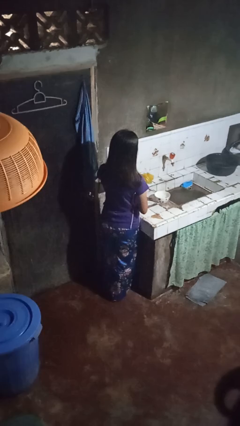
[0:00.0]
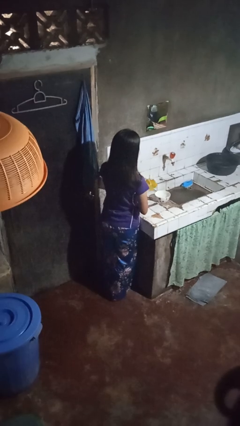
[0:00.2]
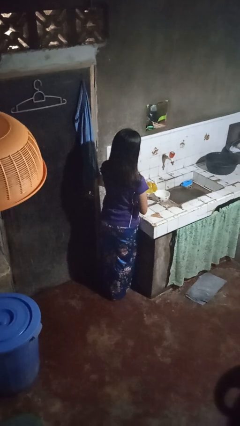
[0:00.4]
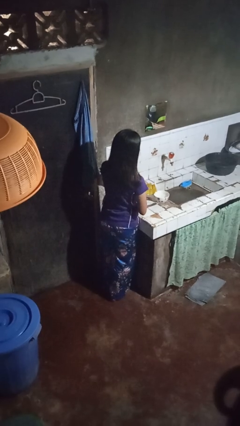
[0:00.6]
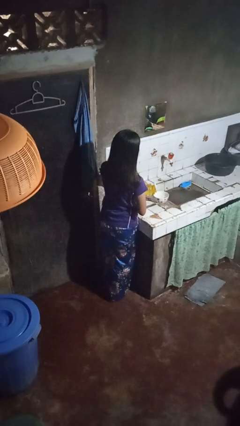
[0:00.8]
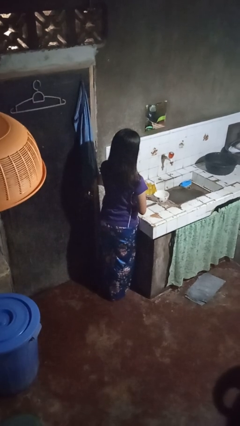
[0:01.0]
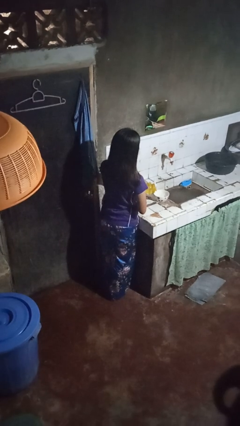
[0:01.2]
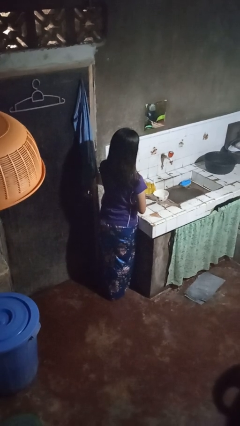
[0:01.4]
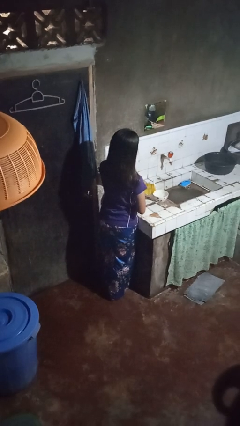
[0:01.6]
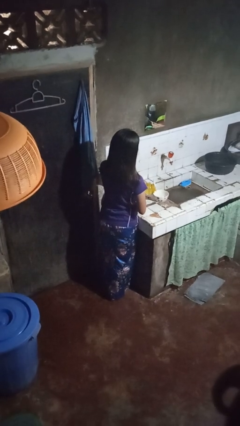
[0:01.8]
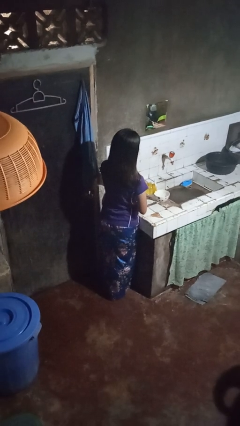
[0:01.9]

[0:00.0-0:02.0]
person pours into bowl

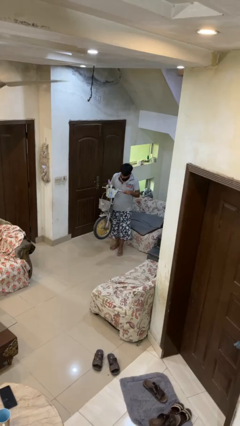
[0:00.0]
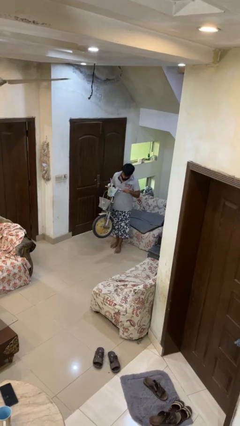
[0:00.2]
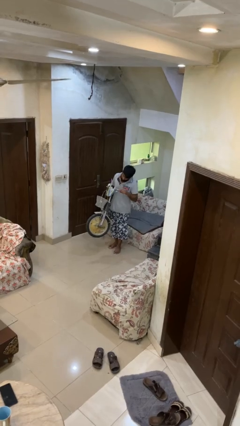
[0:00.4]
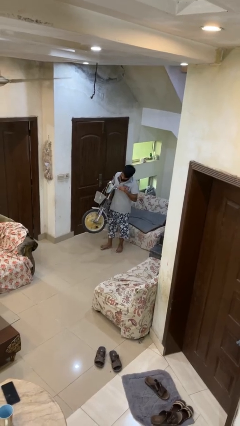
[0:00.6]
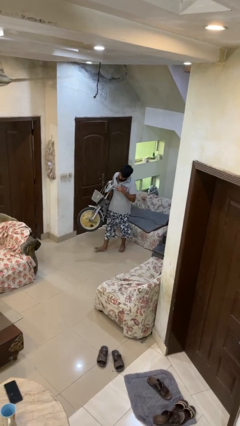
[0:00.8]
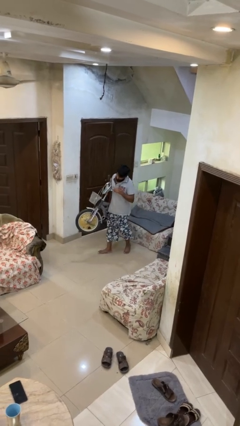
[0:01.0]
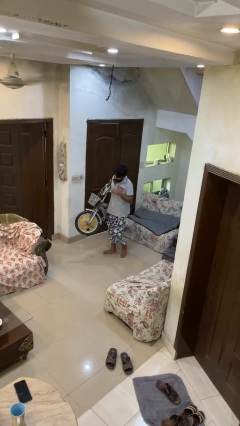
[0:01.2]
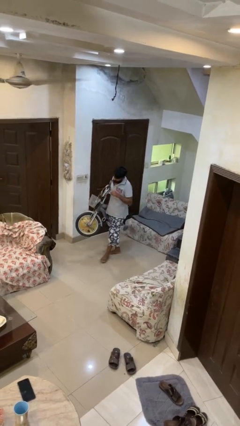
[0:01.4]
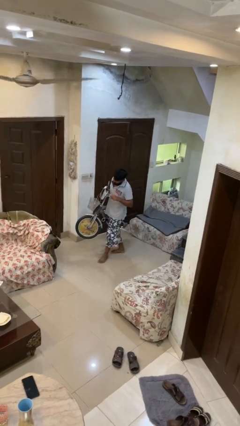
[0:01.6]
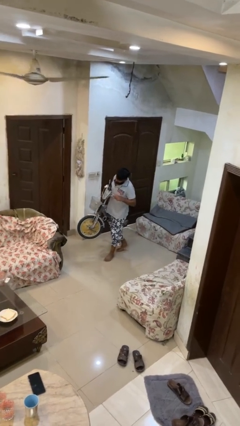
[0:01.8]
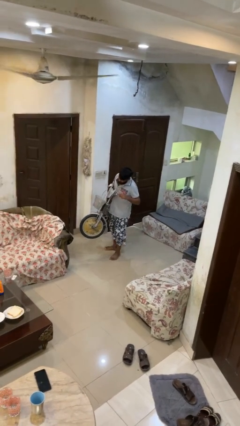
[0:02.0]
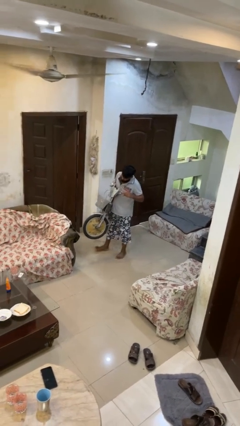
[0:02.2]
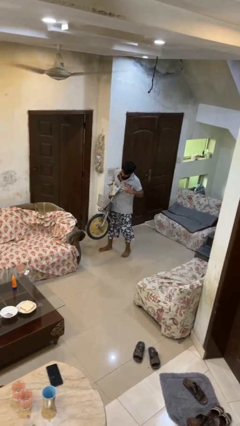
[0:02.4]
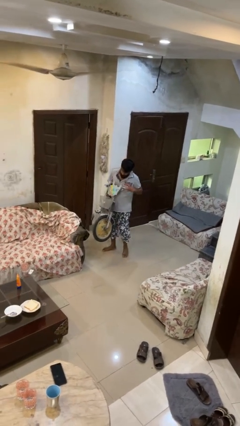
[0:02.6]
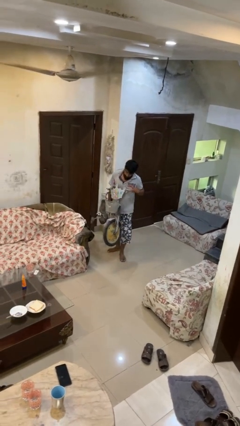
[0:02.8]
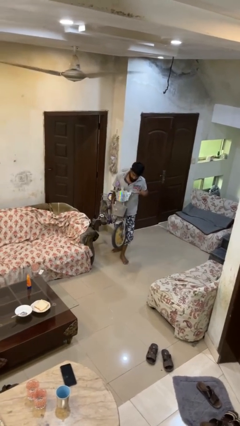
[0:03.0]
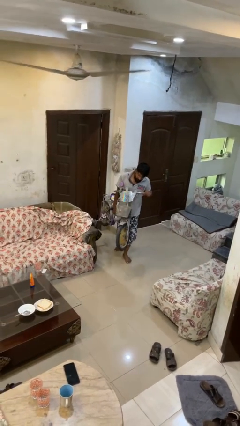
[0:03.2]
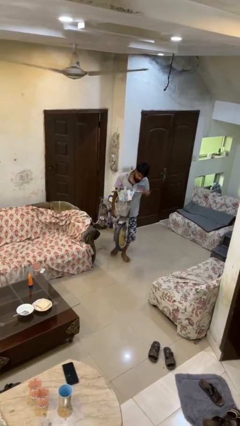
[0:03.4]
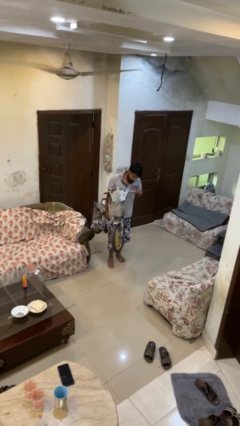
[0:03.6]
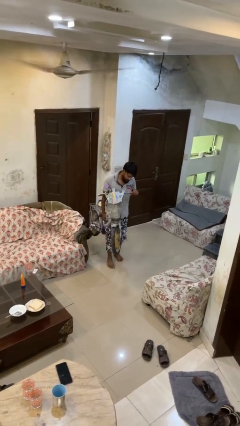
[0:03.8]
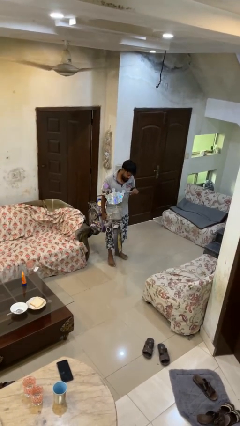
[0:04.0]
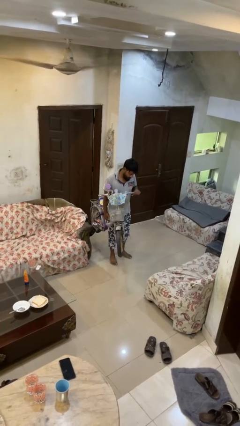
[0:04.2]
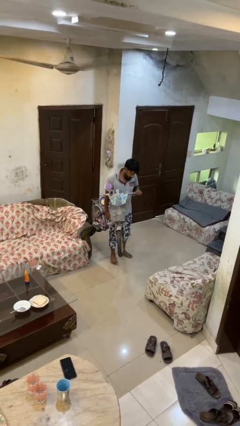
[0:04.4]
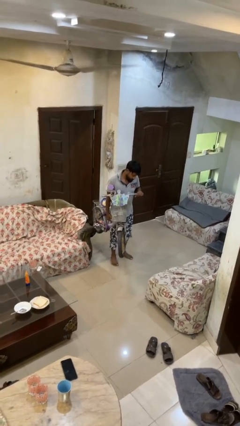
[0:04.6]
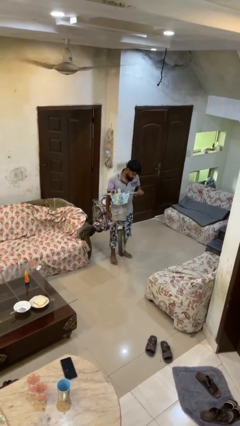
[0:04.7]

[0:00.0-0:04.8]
person carries bicycle

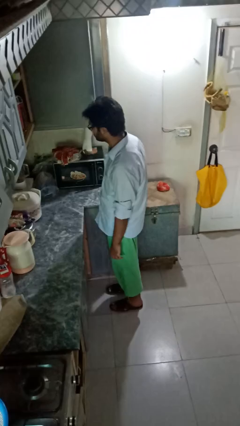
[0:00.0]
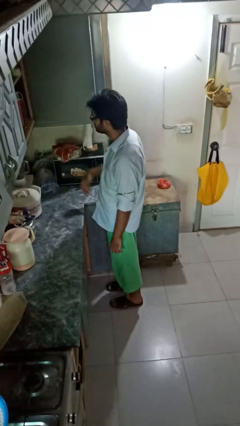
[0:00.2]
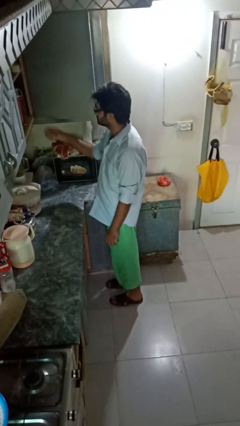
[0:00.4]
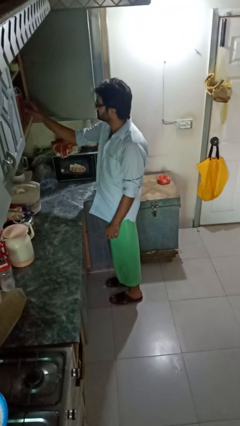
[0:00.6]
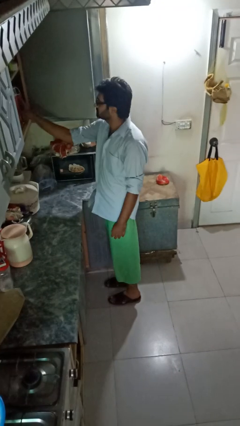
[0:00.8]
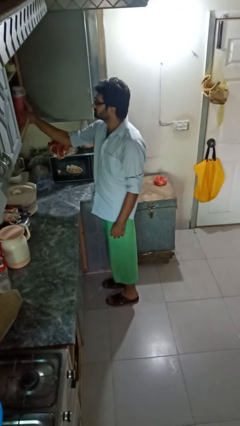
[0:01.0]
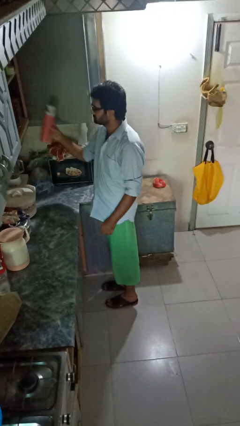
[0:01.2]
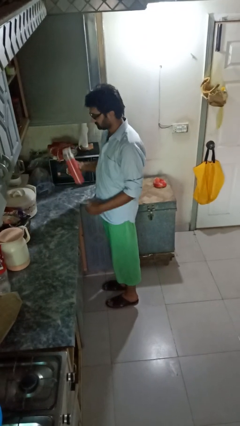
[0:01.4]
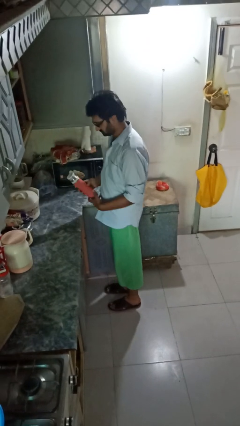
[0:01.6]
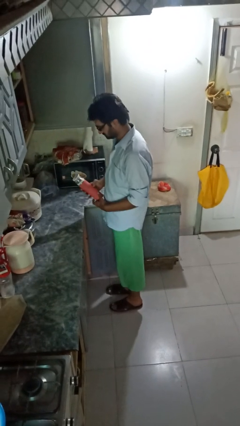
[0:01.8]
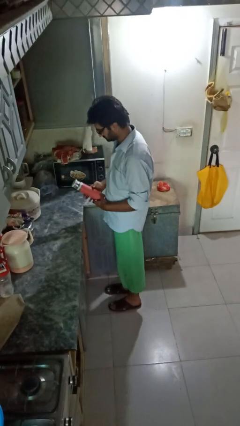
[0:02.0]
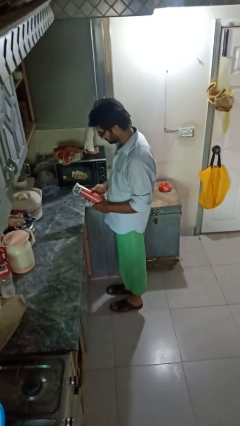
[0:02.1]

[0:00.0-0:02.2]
person picks up object from cabinet

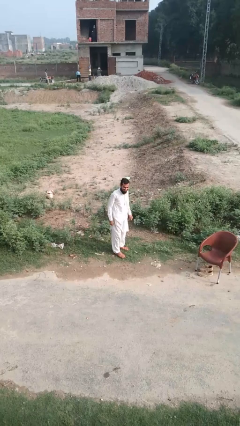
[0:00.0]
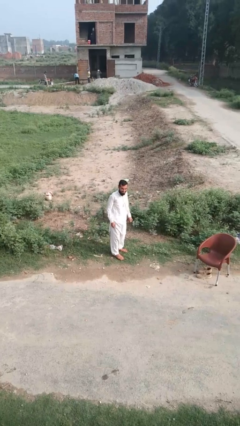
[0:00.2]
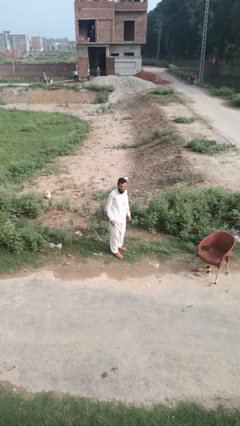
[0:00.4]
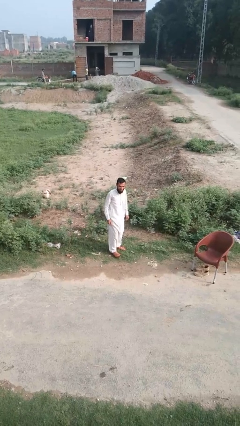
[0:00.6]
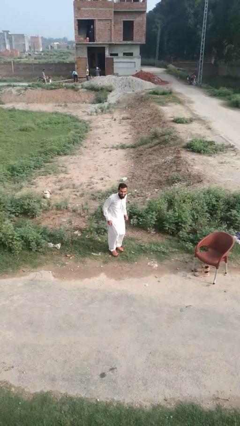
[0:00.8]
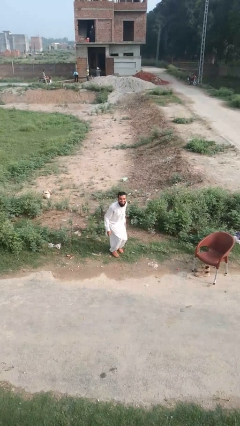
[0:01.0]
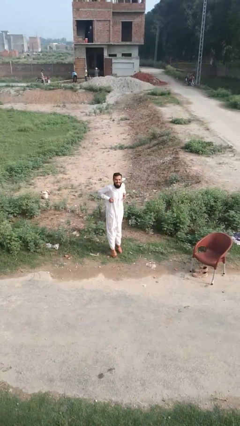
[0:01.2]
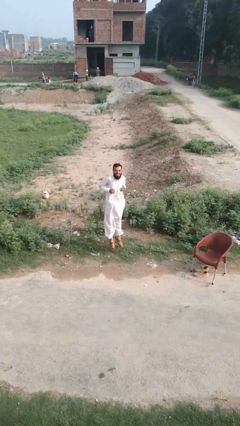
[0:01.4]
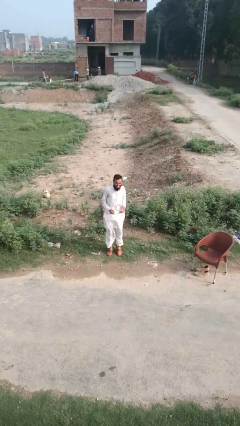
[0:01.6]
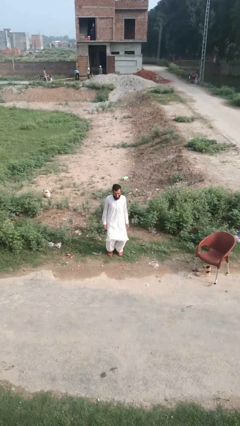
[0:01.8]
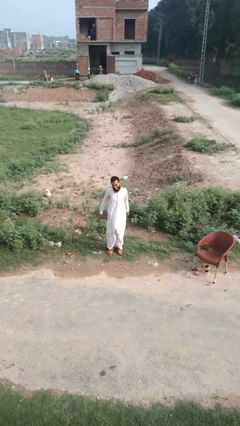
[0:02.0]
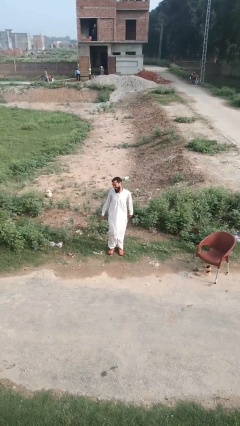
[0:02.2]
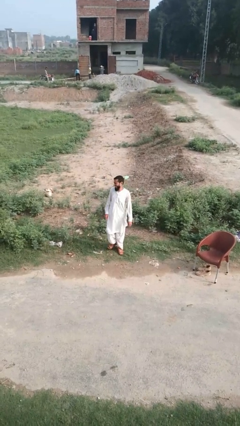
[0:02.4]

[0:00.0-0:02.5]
person jumps

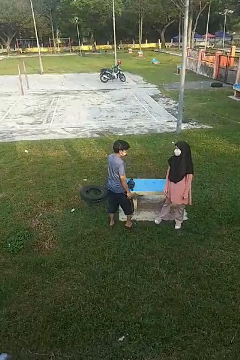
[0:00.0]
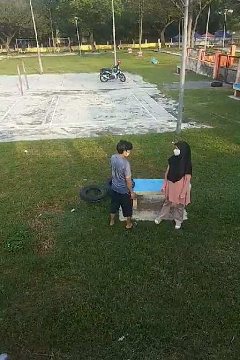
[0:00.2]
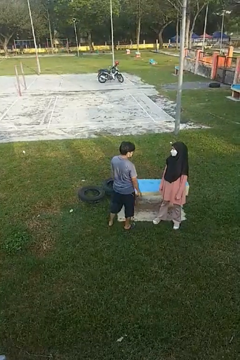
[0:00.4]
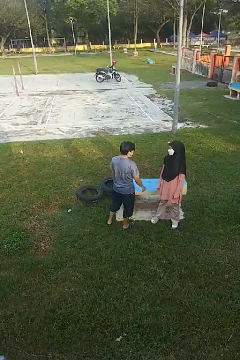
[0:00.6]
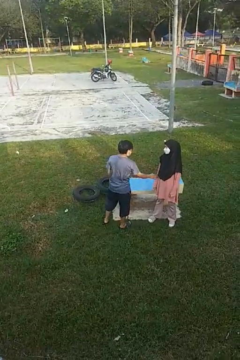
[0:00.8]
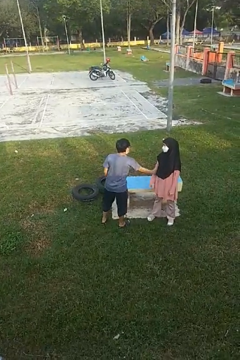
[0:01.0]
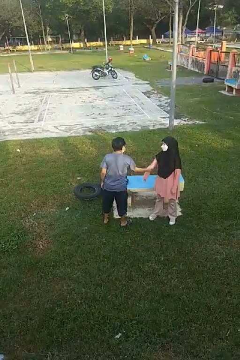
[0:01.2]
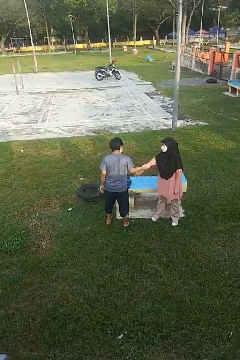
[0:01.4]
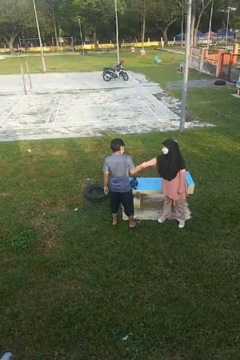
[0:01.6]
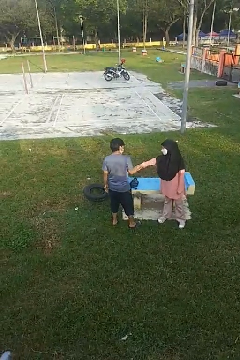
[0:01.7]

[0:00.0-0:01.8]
person grabs person by forearm

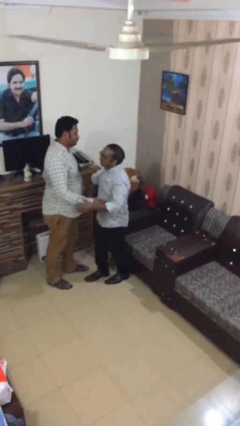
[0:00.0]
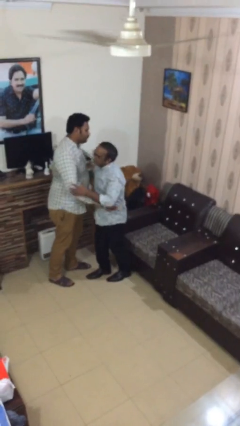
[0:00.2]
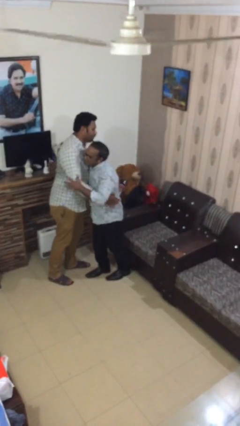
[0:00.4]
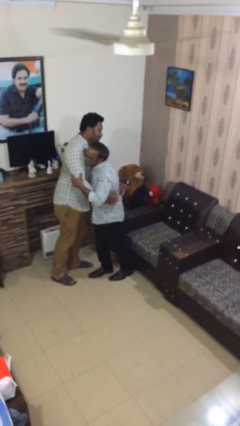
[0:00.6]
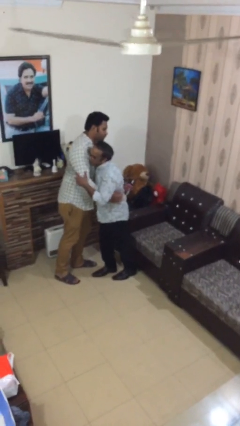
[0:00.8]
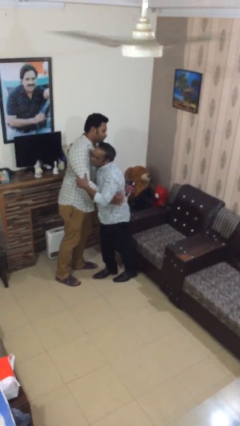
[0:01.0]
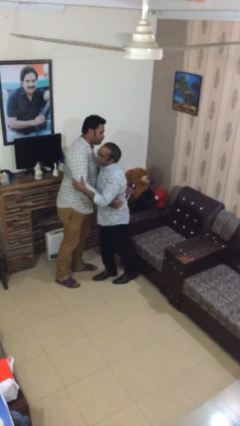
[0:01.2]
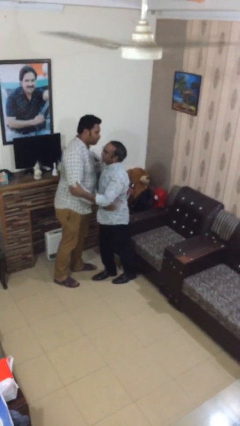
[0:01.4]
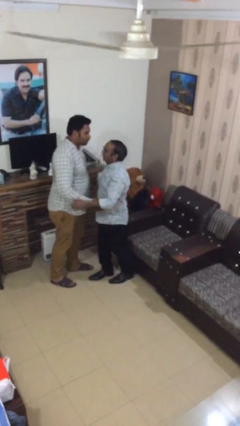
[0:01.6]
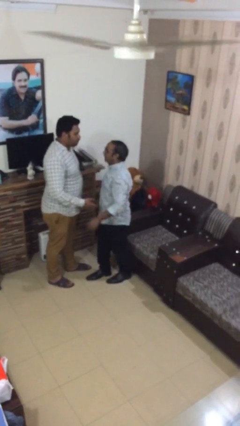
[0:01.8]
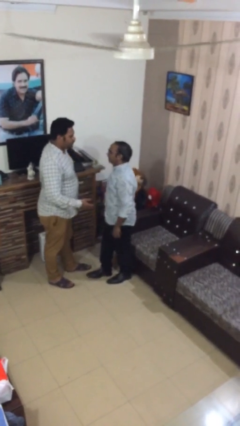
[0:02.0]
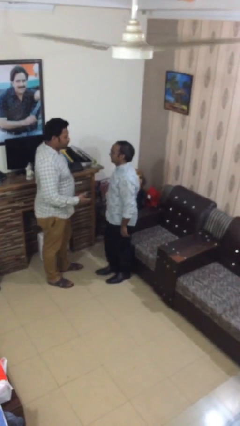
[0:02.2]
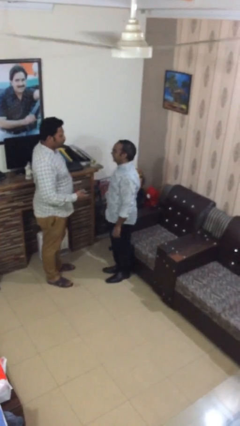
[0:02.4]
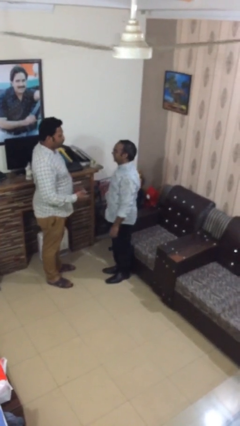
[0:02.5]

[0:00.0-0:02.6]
person embraces person

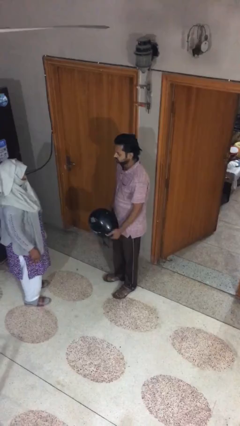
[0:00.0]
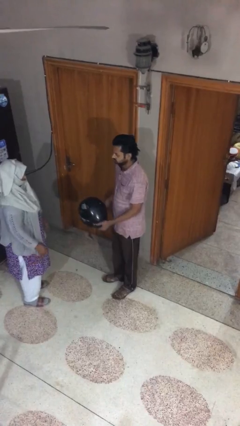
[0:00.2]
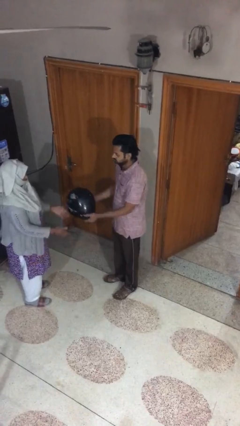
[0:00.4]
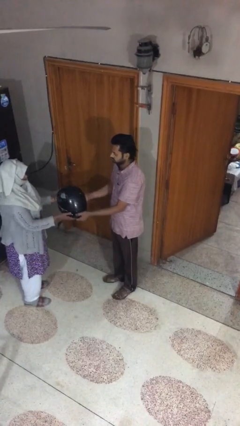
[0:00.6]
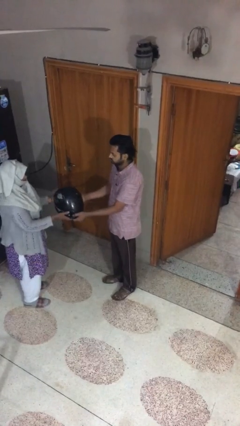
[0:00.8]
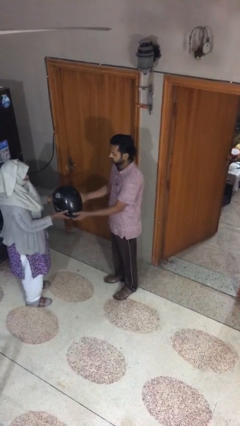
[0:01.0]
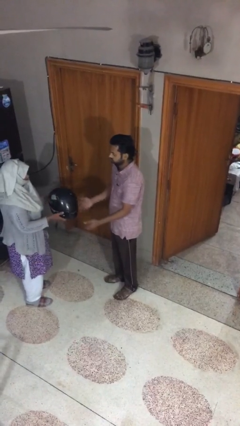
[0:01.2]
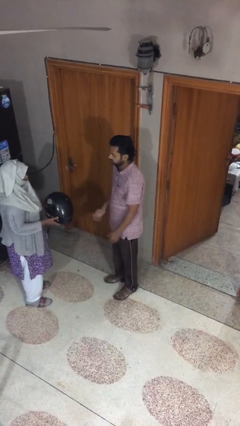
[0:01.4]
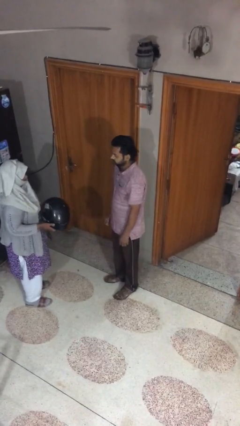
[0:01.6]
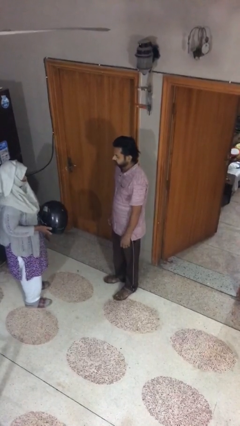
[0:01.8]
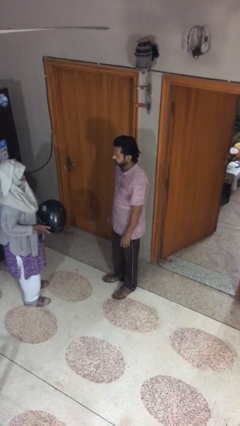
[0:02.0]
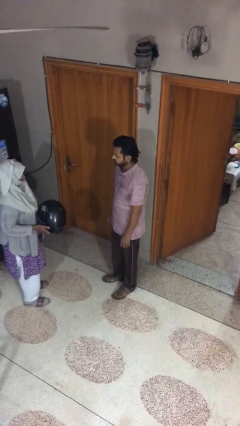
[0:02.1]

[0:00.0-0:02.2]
person transfers object to person
